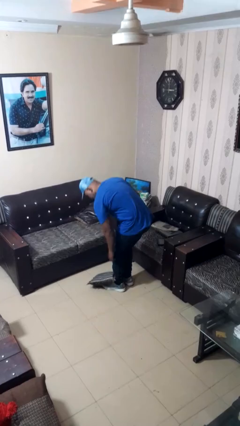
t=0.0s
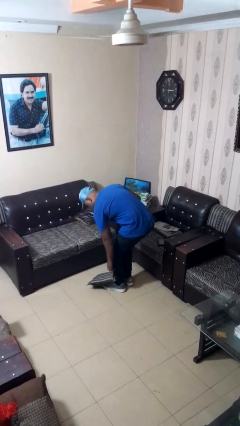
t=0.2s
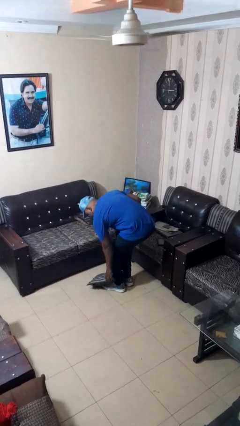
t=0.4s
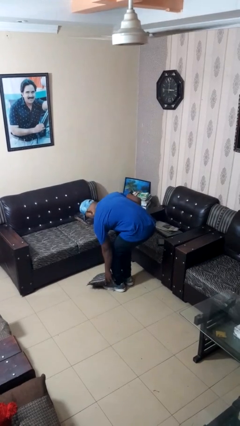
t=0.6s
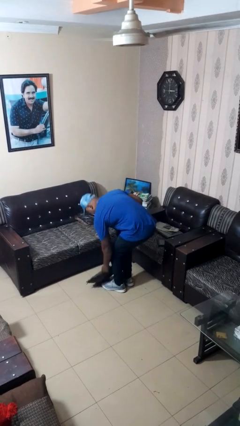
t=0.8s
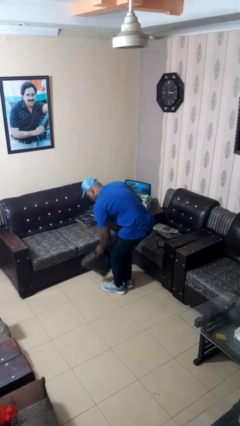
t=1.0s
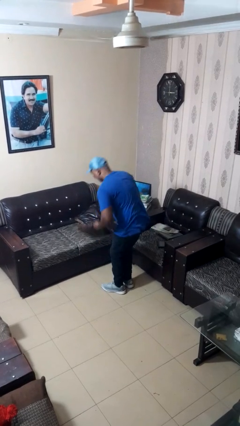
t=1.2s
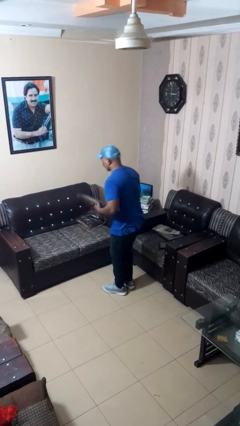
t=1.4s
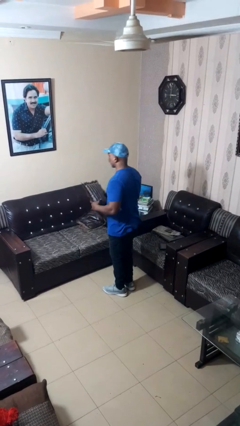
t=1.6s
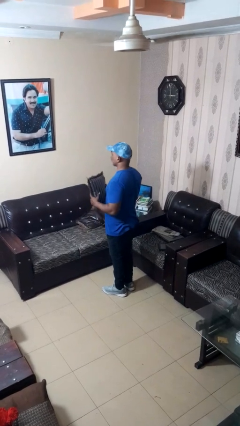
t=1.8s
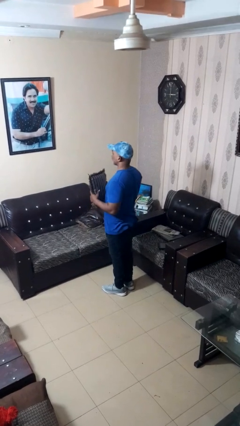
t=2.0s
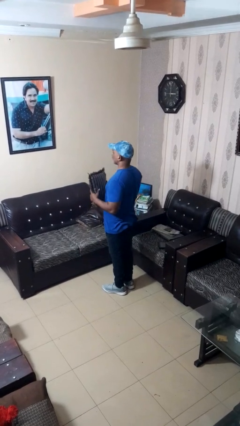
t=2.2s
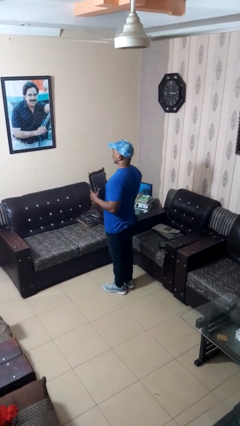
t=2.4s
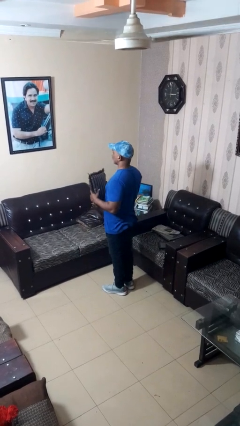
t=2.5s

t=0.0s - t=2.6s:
person picks up object from floor

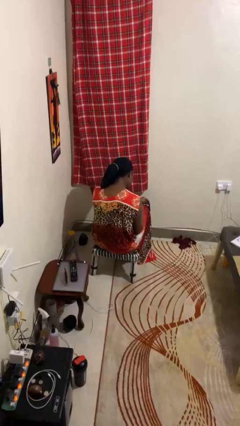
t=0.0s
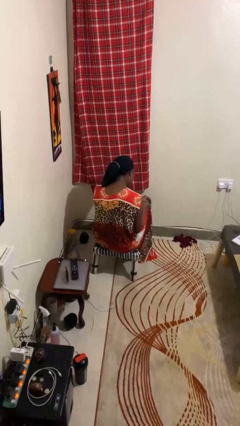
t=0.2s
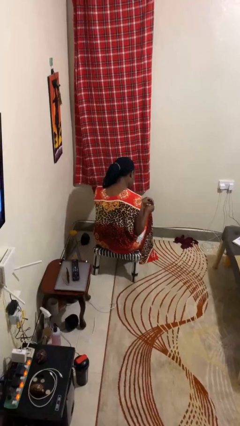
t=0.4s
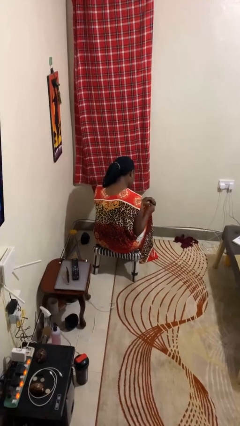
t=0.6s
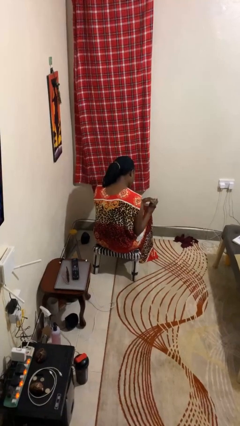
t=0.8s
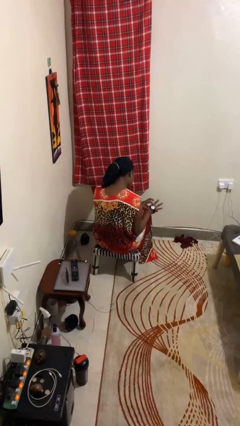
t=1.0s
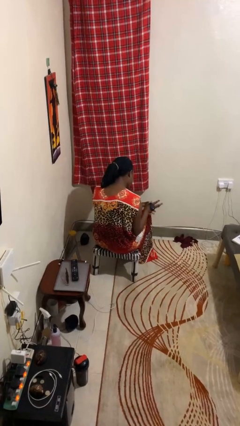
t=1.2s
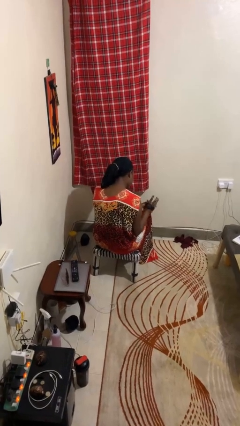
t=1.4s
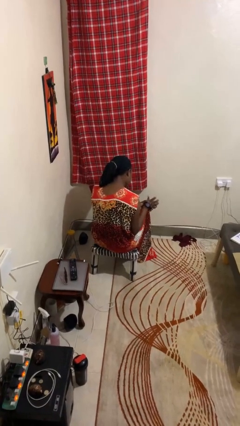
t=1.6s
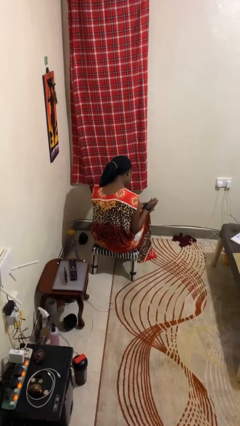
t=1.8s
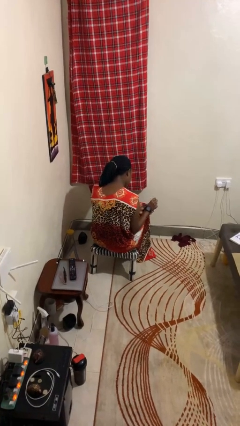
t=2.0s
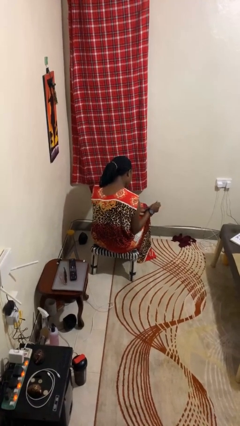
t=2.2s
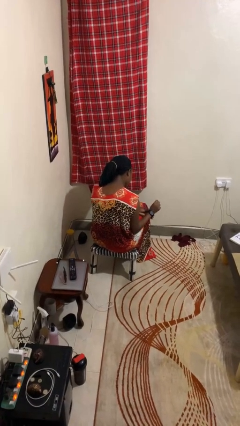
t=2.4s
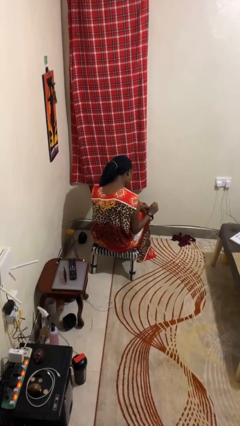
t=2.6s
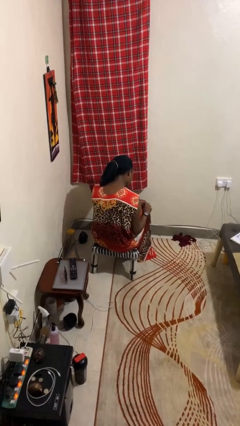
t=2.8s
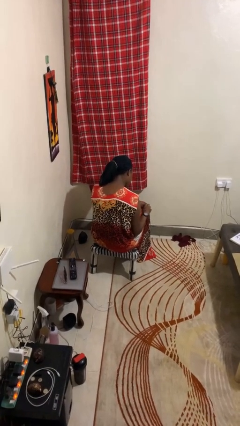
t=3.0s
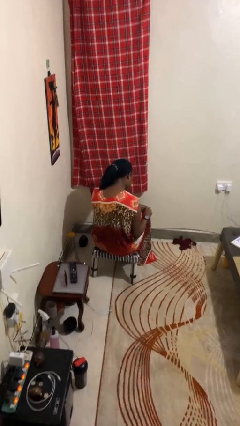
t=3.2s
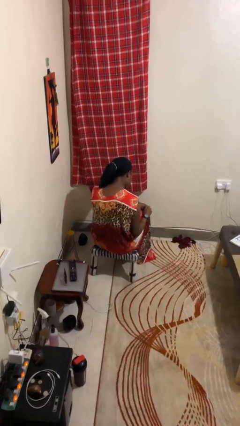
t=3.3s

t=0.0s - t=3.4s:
person puts on wristwatch

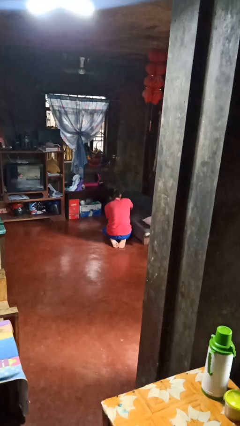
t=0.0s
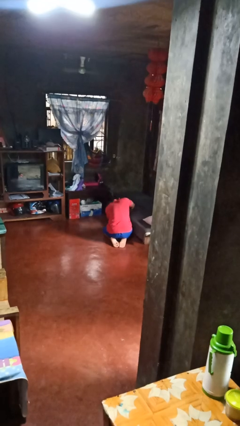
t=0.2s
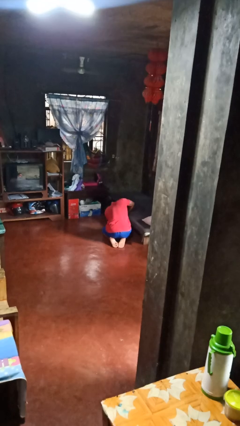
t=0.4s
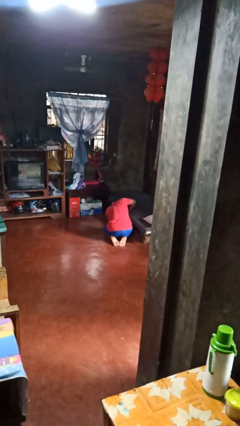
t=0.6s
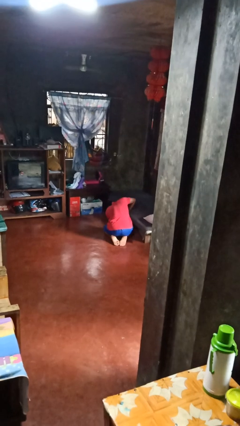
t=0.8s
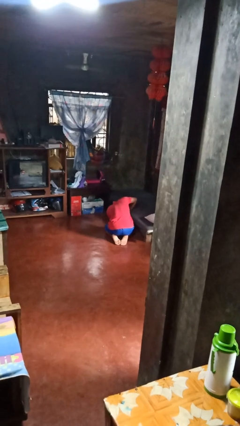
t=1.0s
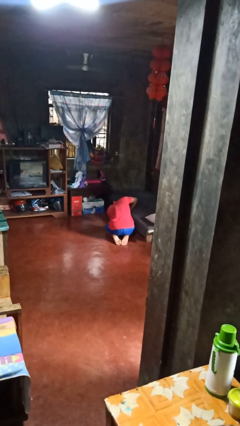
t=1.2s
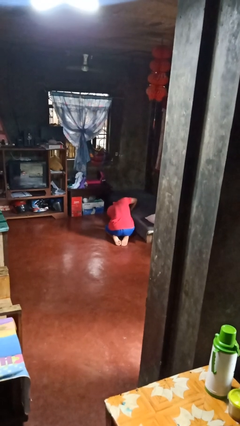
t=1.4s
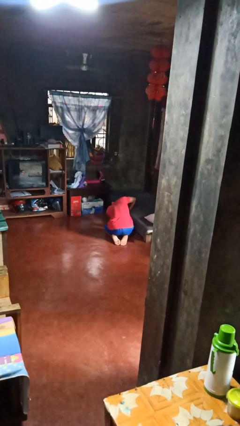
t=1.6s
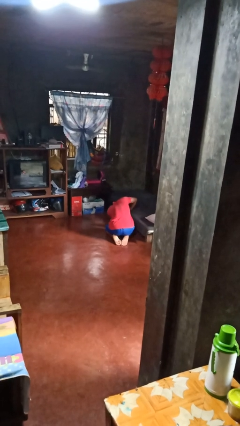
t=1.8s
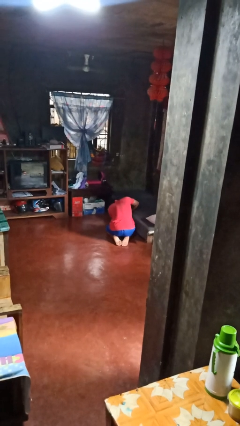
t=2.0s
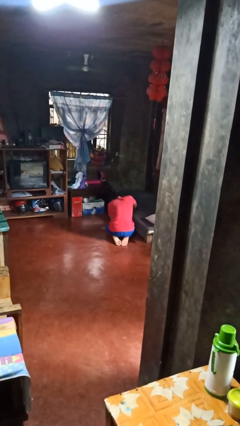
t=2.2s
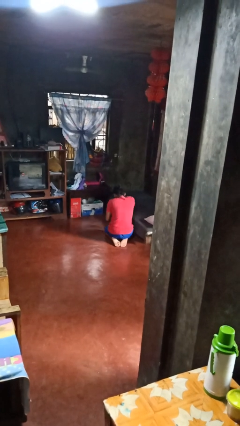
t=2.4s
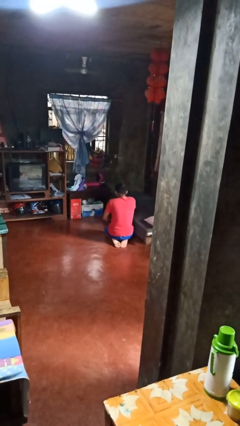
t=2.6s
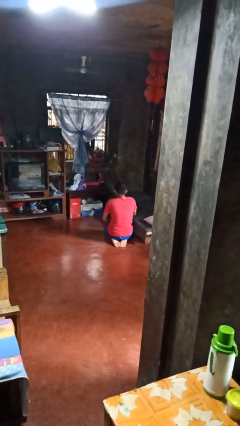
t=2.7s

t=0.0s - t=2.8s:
person searches under bed

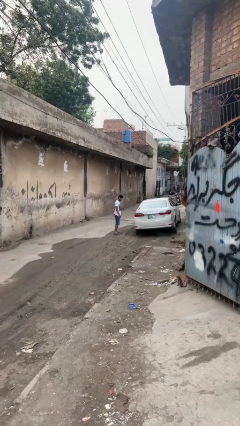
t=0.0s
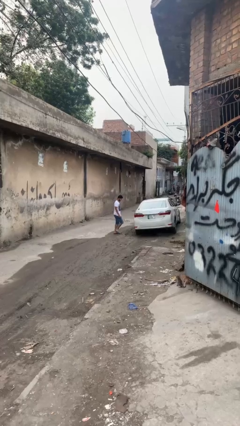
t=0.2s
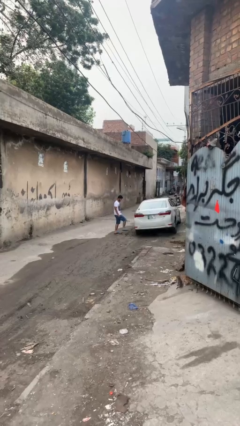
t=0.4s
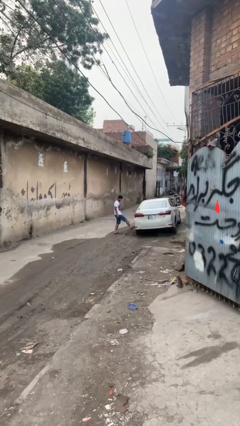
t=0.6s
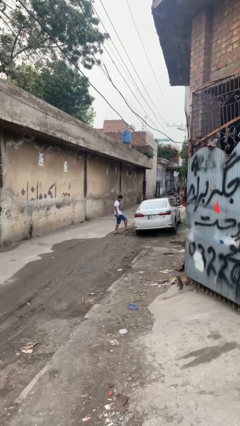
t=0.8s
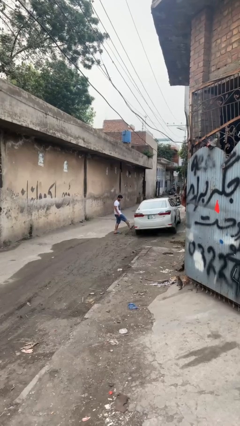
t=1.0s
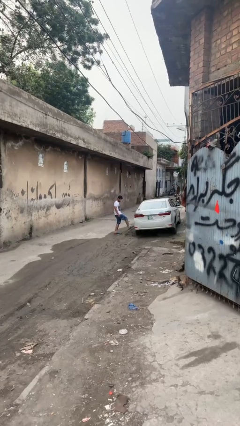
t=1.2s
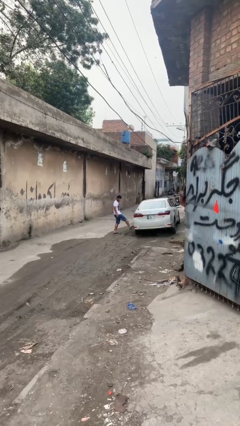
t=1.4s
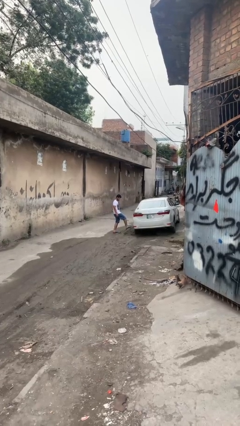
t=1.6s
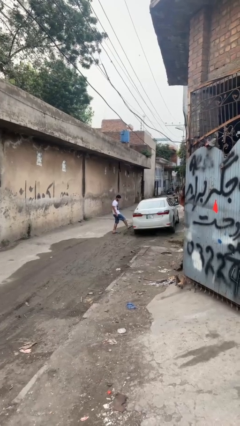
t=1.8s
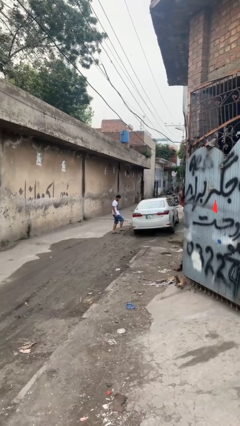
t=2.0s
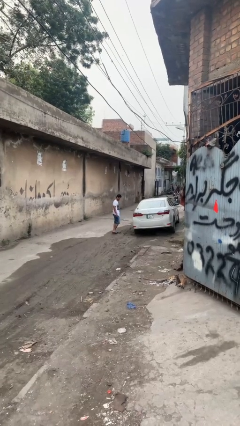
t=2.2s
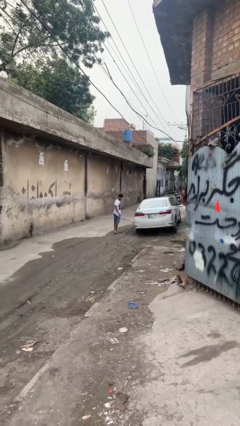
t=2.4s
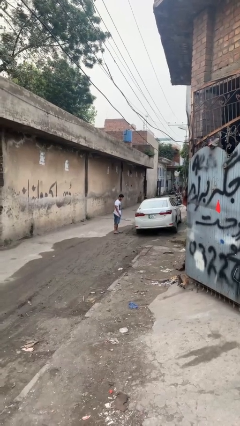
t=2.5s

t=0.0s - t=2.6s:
person kicks car tires

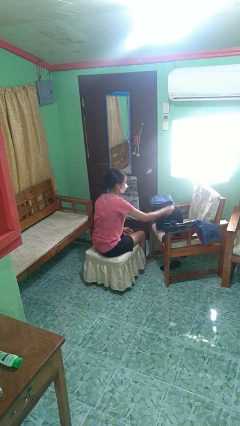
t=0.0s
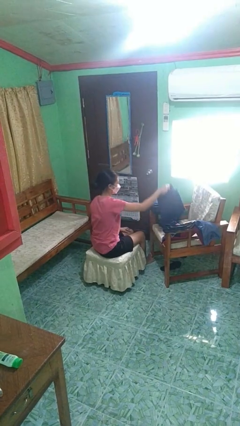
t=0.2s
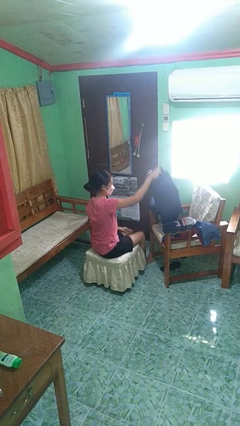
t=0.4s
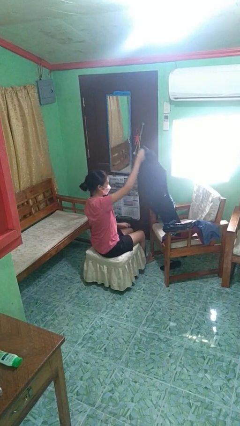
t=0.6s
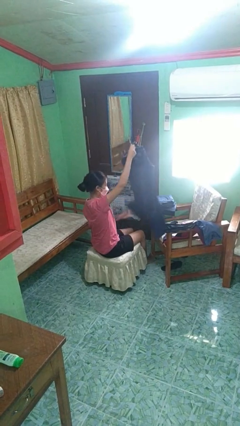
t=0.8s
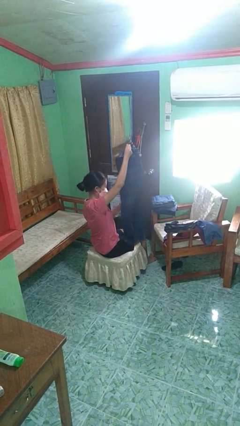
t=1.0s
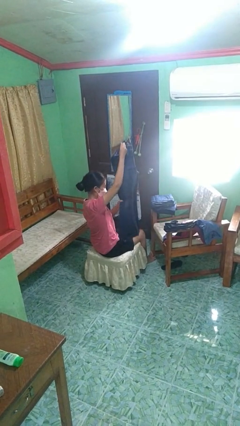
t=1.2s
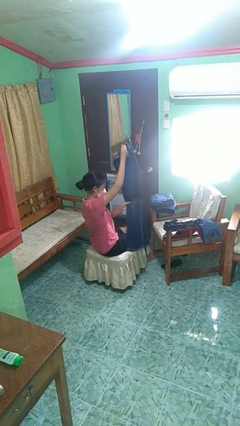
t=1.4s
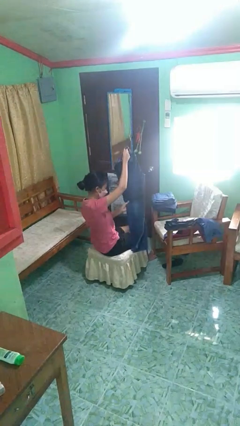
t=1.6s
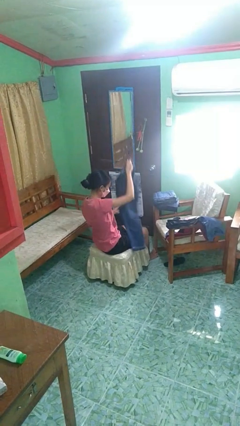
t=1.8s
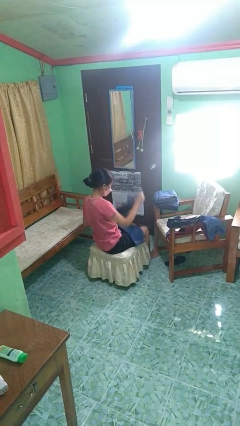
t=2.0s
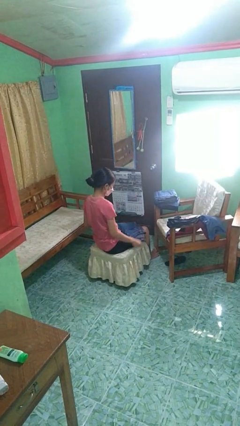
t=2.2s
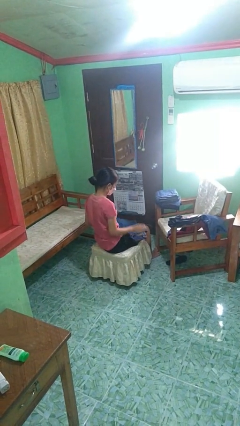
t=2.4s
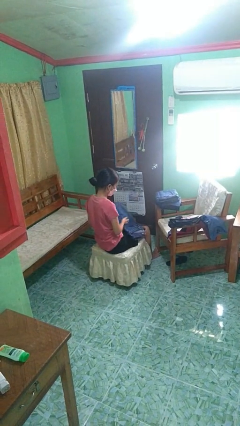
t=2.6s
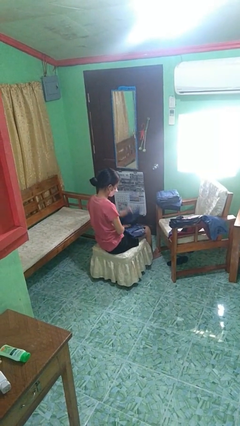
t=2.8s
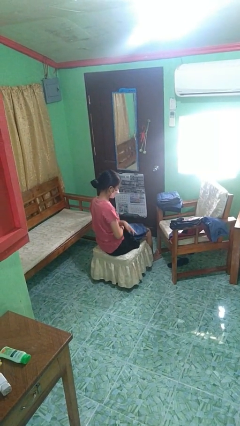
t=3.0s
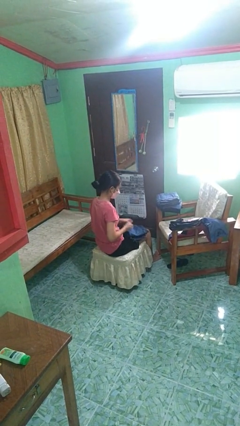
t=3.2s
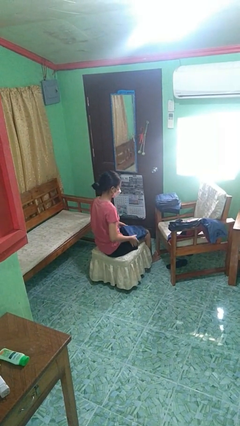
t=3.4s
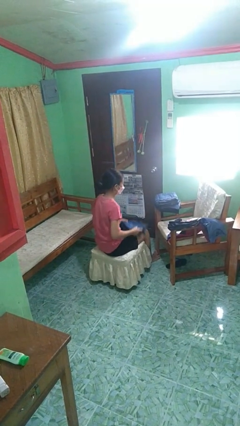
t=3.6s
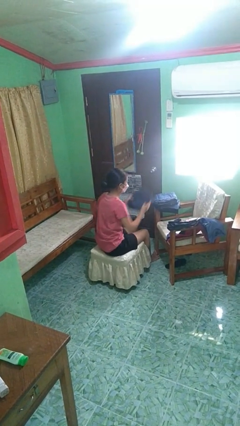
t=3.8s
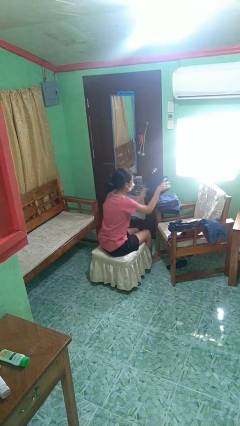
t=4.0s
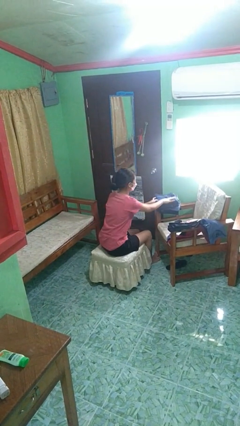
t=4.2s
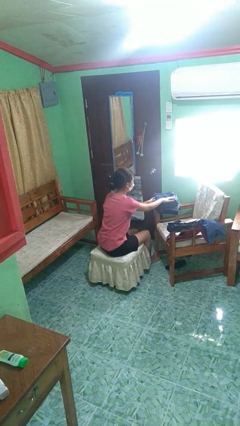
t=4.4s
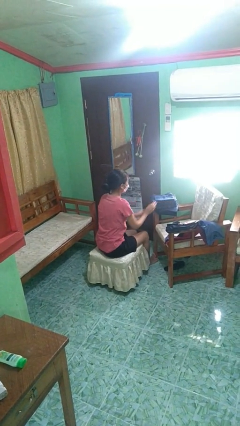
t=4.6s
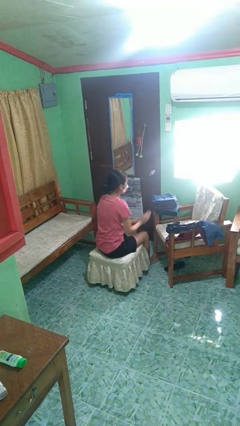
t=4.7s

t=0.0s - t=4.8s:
person folds pants

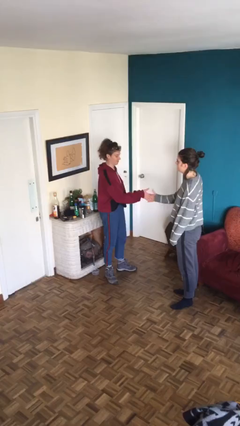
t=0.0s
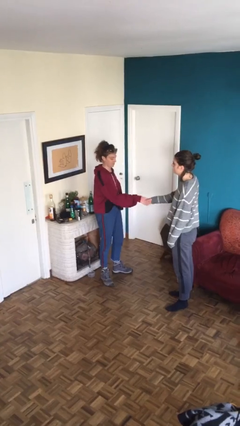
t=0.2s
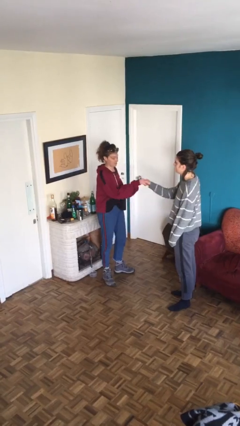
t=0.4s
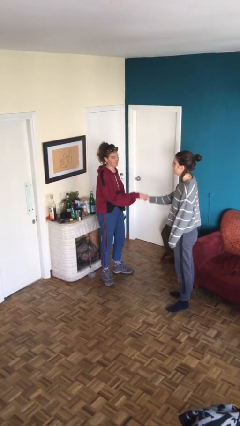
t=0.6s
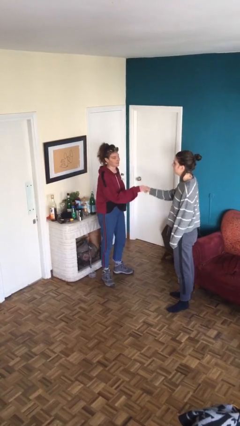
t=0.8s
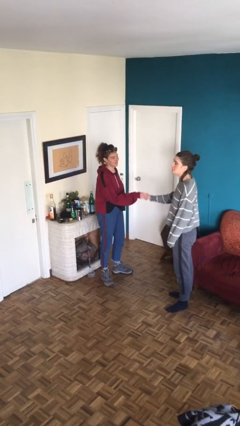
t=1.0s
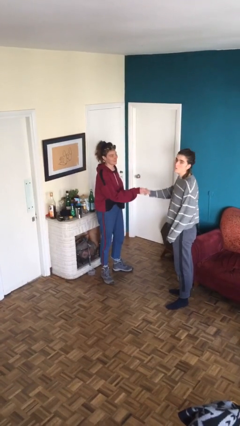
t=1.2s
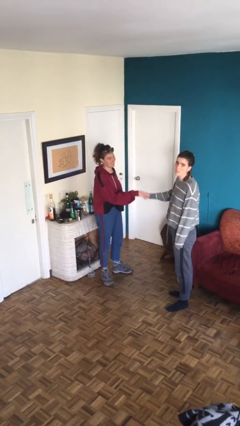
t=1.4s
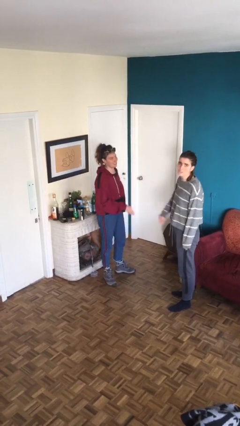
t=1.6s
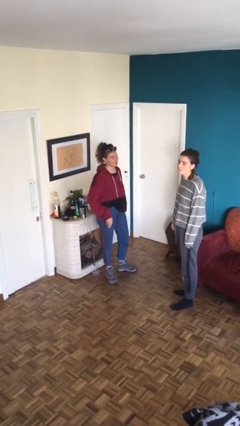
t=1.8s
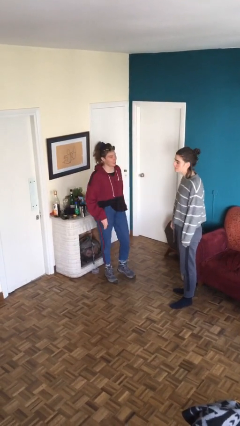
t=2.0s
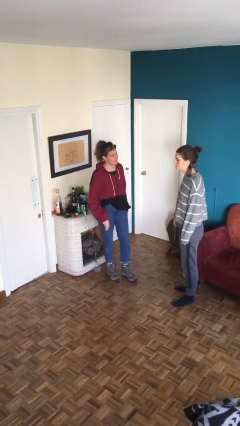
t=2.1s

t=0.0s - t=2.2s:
person shakes hand
